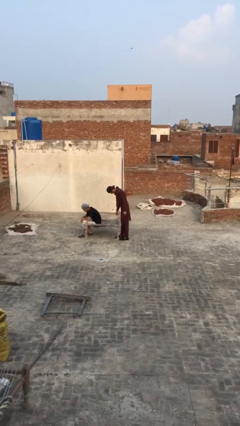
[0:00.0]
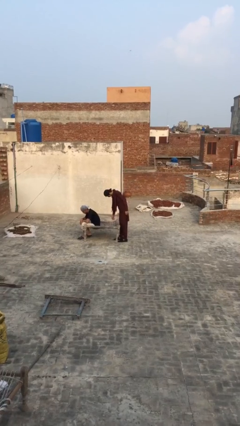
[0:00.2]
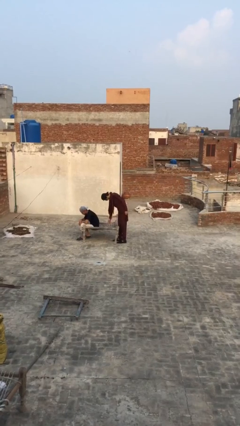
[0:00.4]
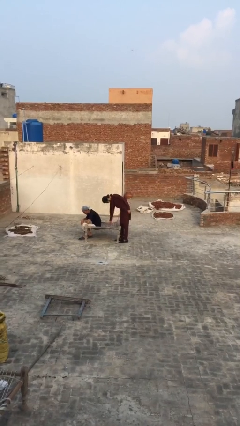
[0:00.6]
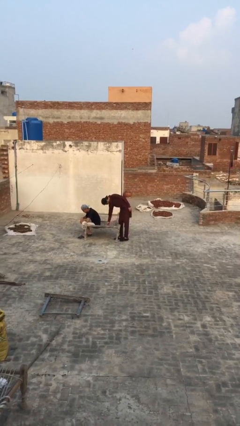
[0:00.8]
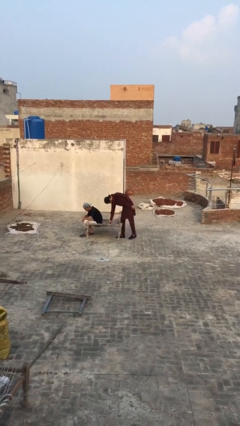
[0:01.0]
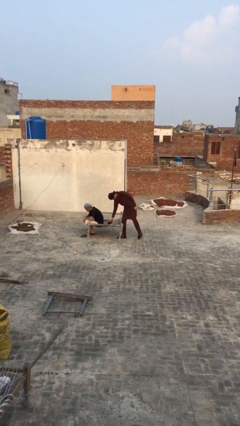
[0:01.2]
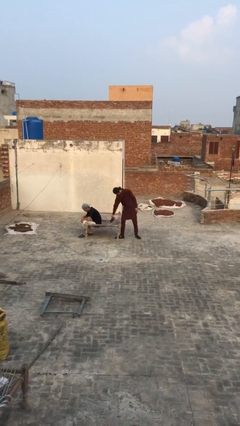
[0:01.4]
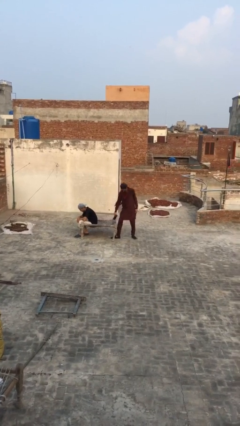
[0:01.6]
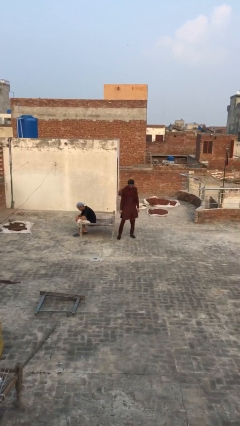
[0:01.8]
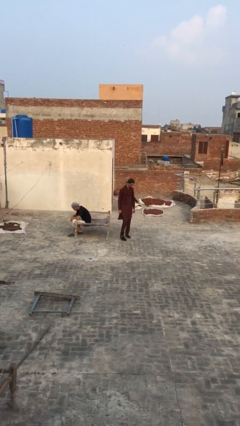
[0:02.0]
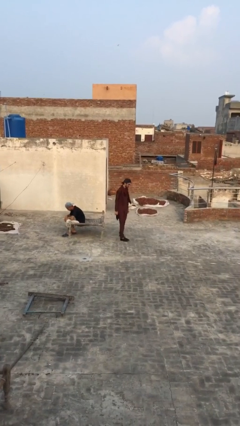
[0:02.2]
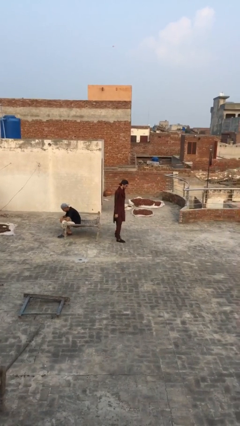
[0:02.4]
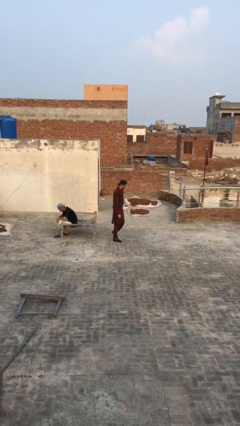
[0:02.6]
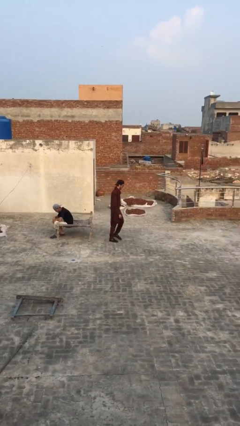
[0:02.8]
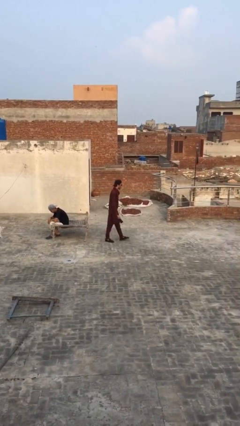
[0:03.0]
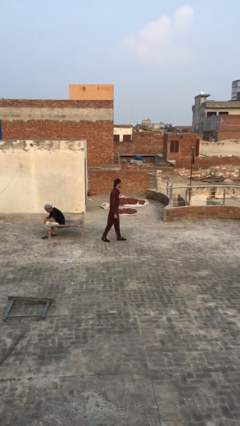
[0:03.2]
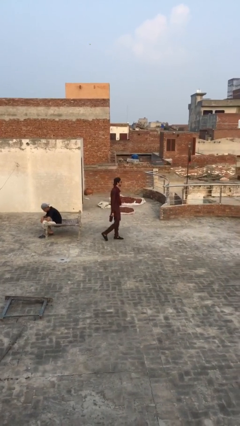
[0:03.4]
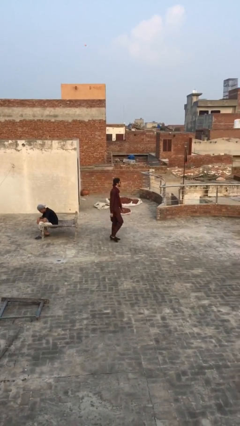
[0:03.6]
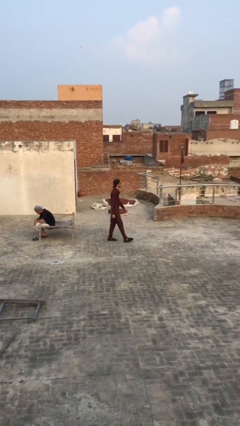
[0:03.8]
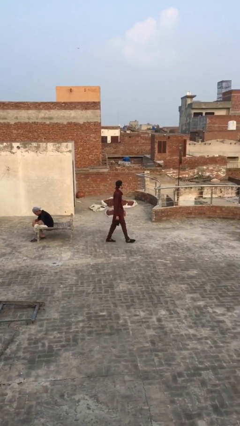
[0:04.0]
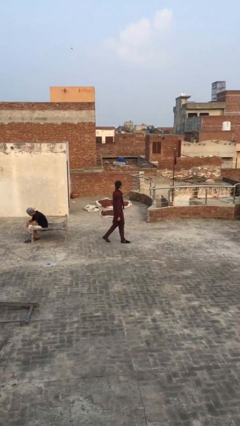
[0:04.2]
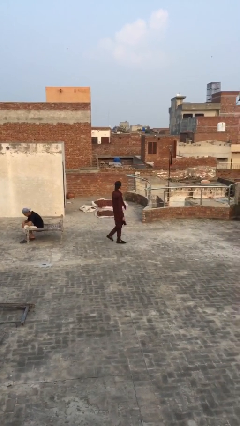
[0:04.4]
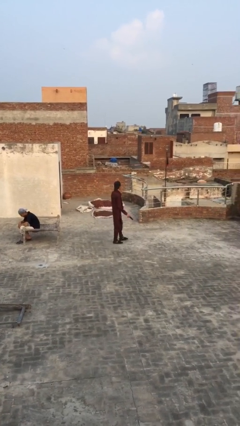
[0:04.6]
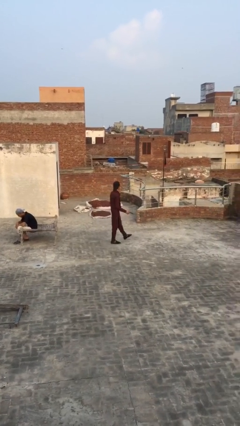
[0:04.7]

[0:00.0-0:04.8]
person steals object from person

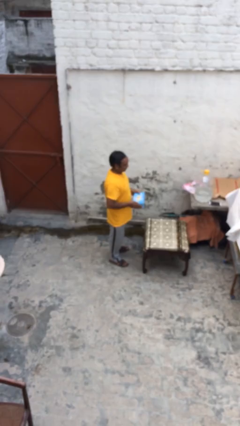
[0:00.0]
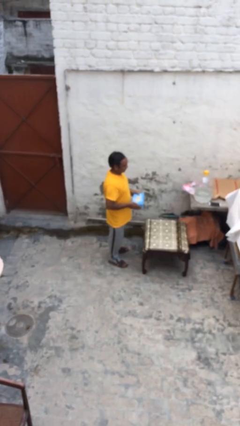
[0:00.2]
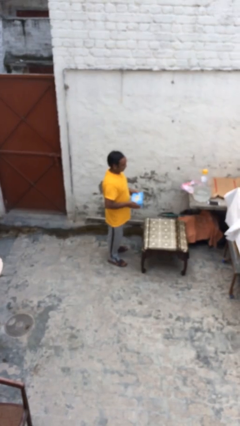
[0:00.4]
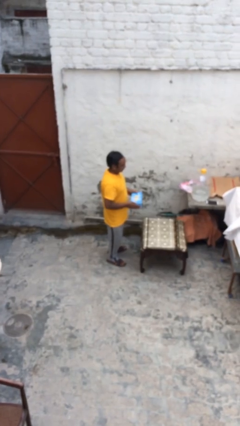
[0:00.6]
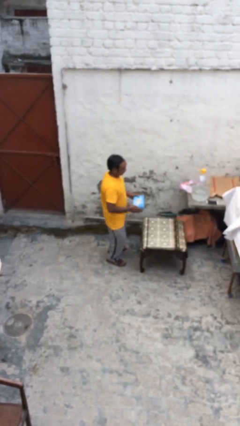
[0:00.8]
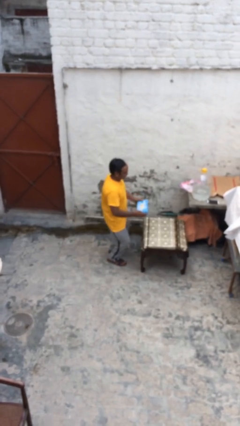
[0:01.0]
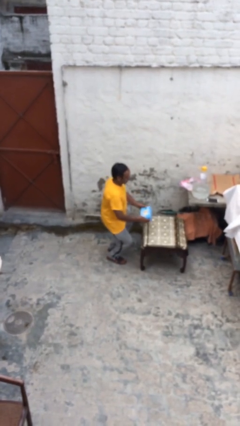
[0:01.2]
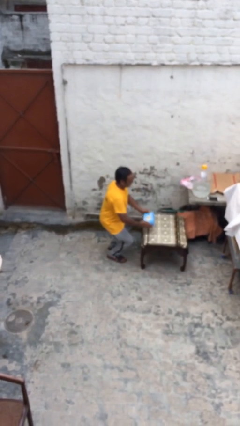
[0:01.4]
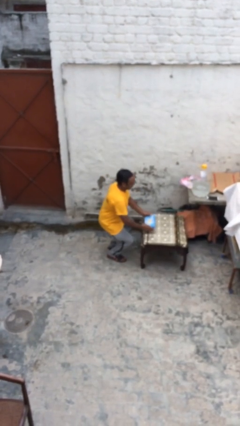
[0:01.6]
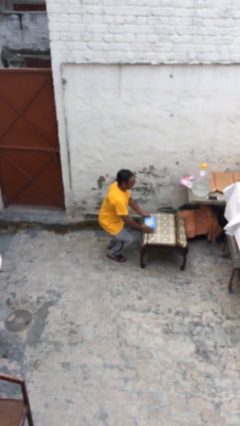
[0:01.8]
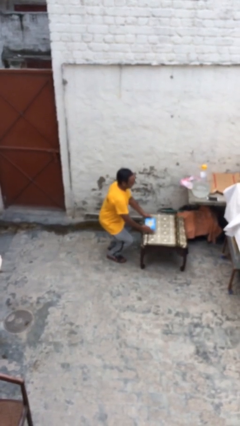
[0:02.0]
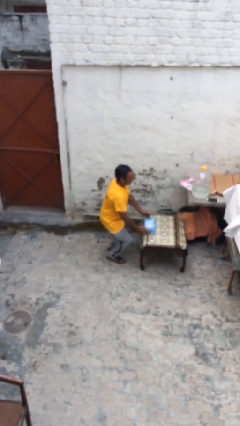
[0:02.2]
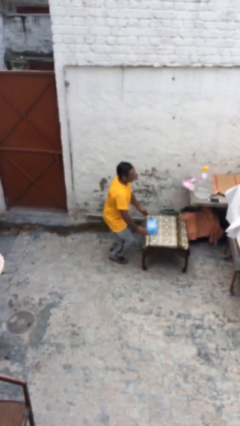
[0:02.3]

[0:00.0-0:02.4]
person puts down object on table

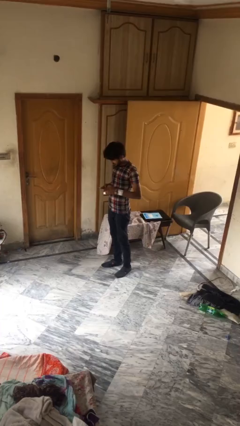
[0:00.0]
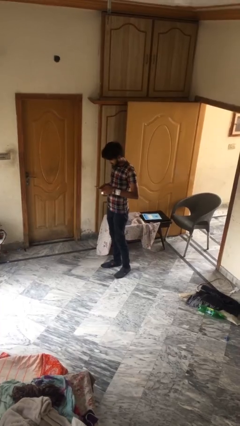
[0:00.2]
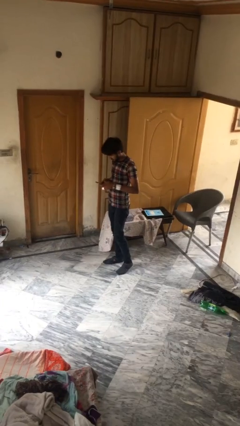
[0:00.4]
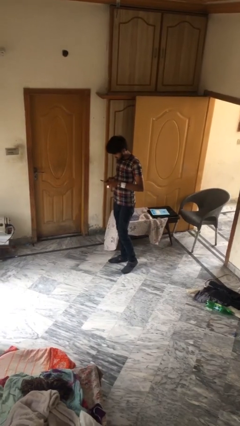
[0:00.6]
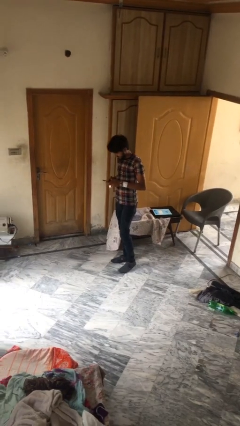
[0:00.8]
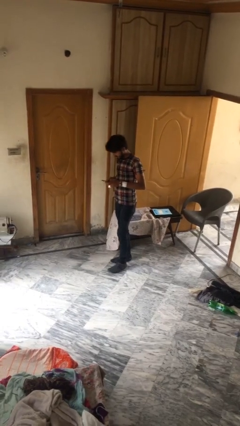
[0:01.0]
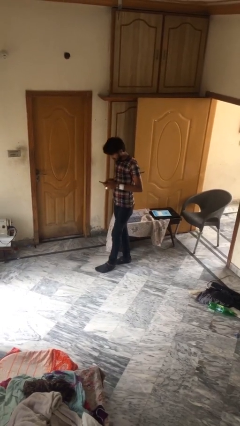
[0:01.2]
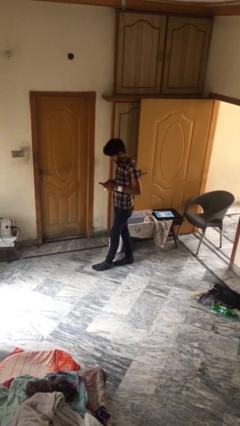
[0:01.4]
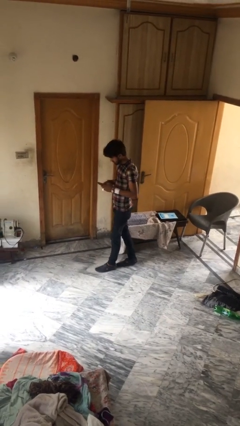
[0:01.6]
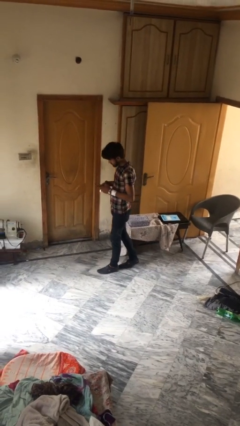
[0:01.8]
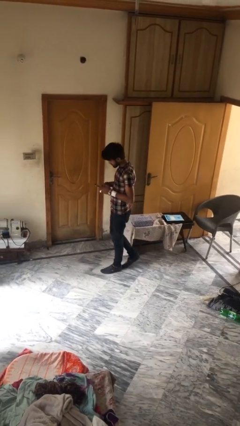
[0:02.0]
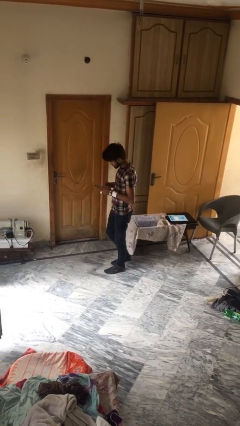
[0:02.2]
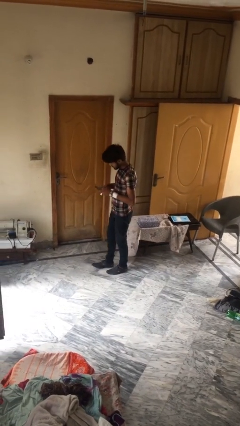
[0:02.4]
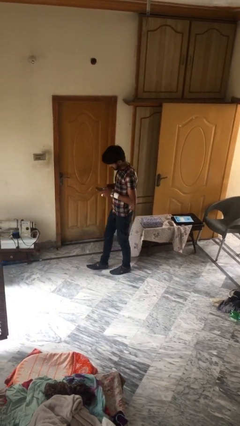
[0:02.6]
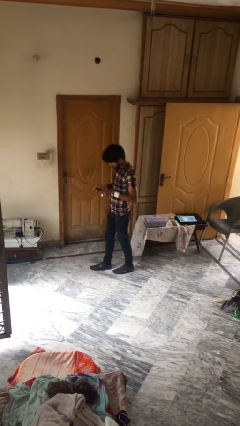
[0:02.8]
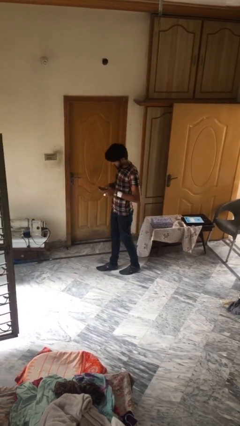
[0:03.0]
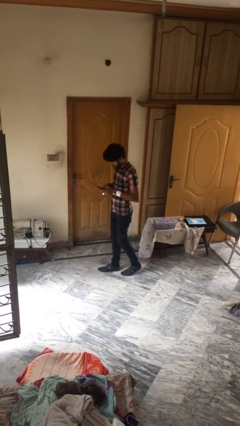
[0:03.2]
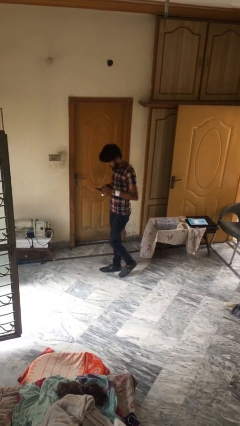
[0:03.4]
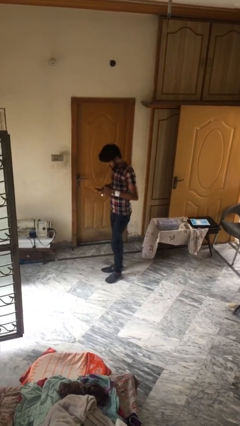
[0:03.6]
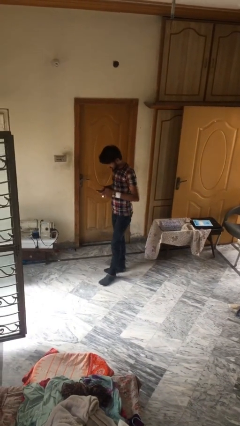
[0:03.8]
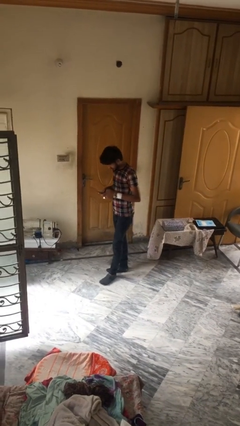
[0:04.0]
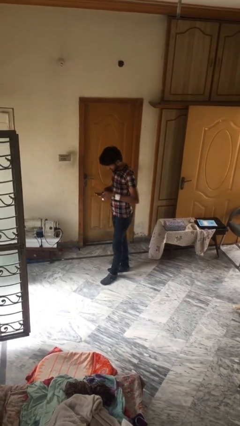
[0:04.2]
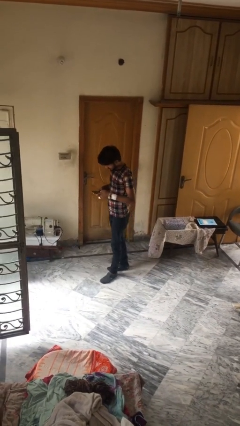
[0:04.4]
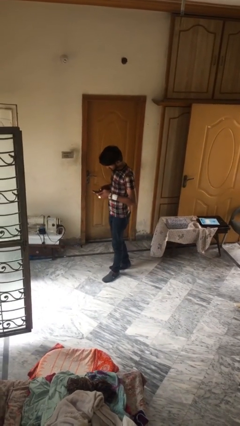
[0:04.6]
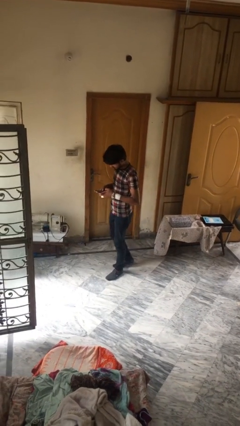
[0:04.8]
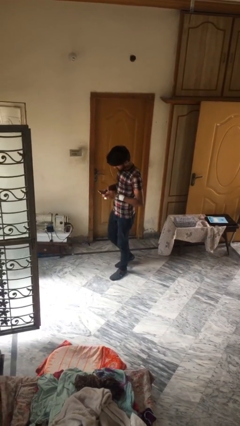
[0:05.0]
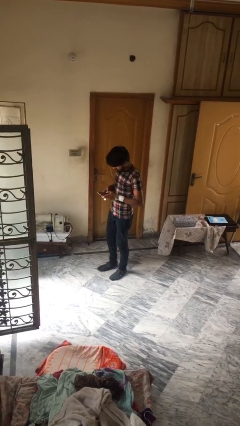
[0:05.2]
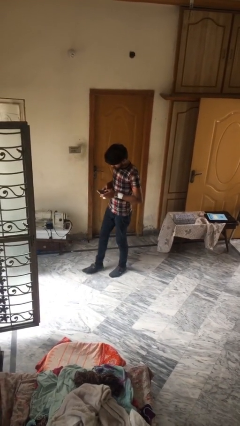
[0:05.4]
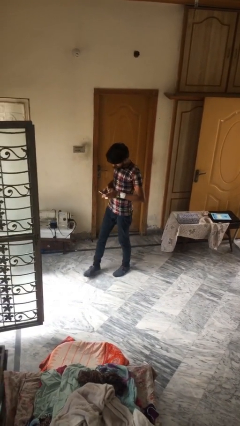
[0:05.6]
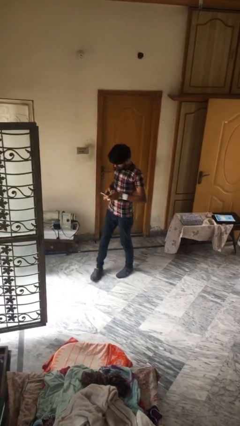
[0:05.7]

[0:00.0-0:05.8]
person texts on phone

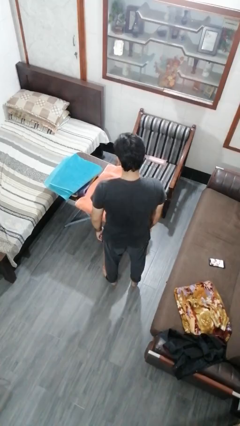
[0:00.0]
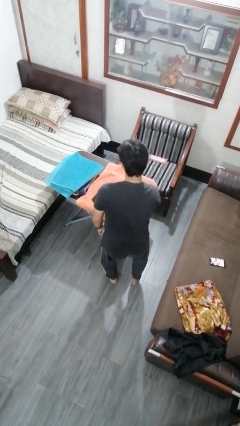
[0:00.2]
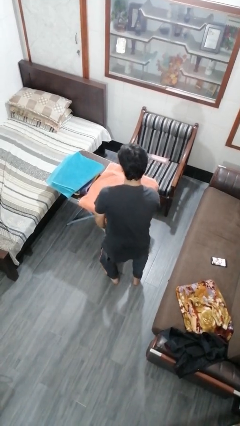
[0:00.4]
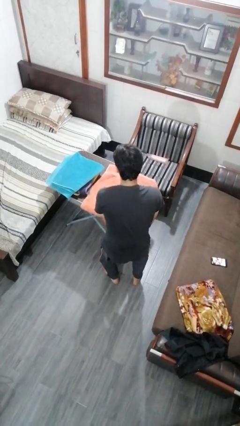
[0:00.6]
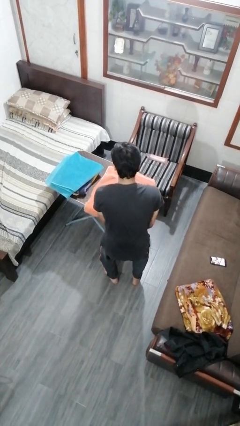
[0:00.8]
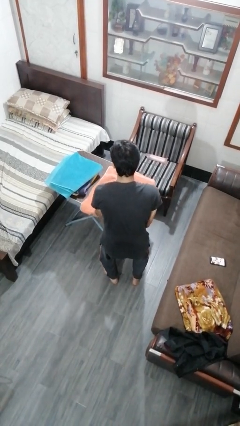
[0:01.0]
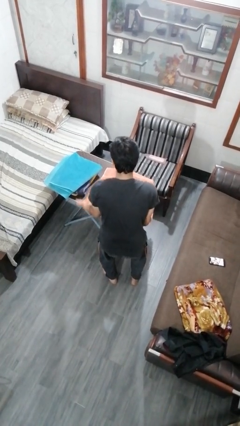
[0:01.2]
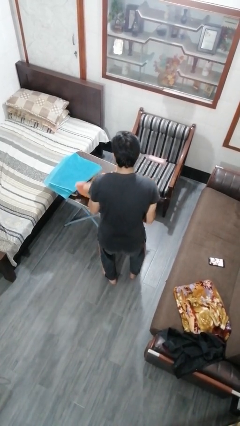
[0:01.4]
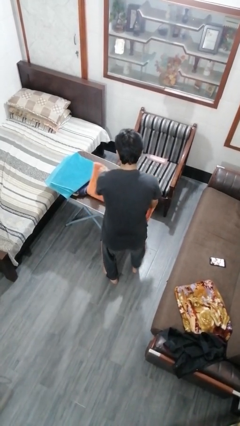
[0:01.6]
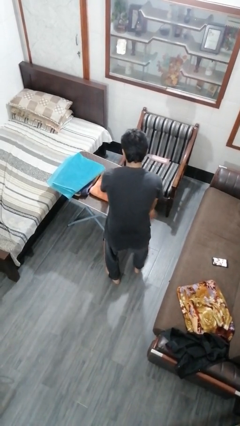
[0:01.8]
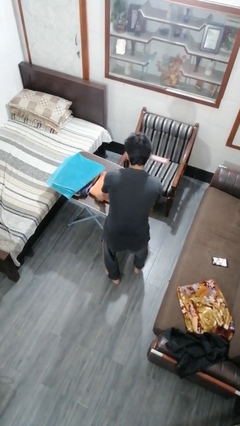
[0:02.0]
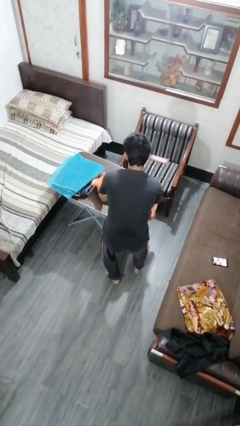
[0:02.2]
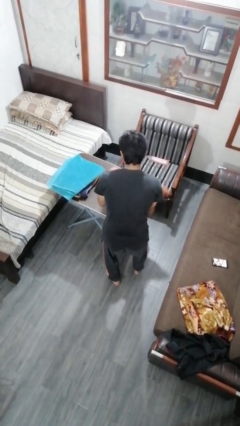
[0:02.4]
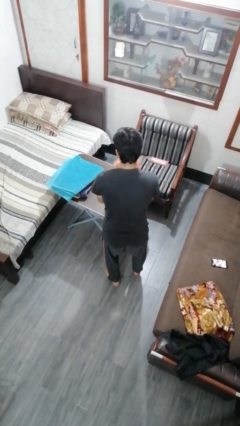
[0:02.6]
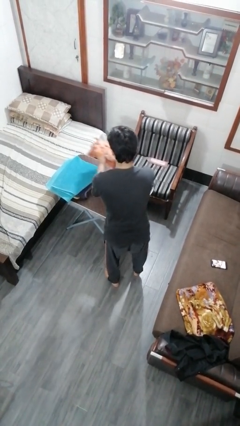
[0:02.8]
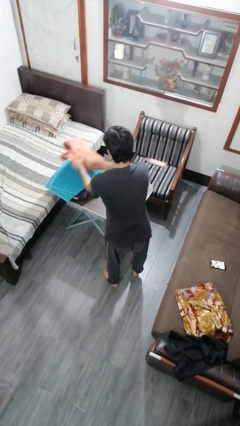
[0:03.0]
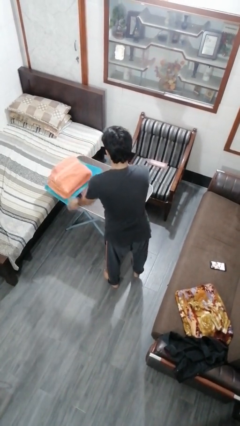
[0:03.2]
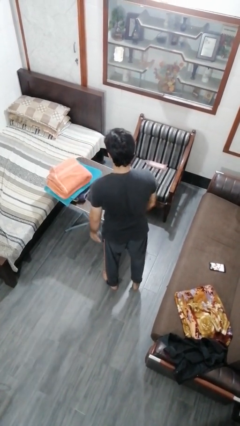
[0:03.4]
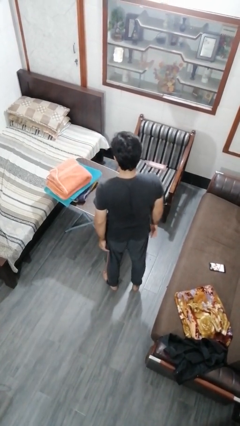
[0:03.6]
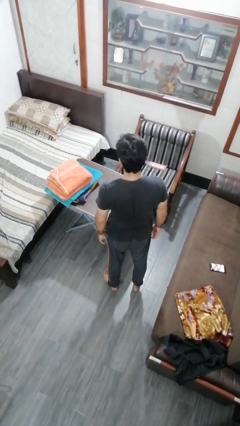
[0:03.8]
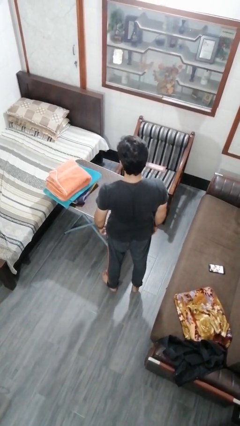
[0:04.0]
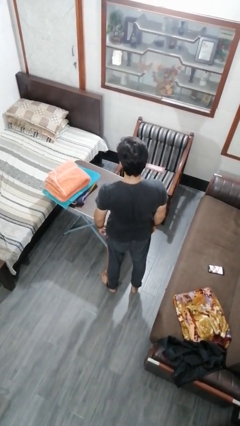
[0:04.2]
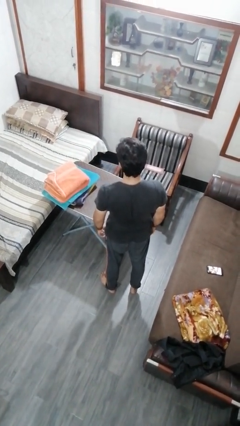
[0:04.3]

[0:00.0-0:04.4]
person folds towel

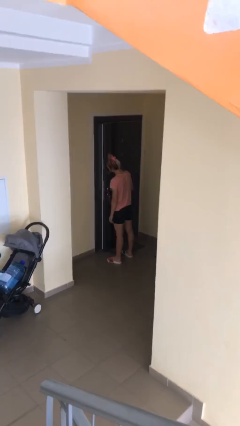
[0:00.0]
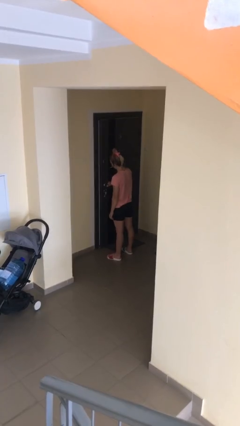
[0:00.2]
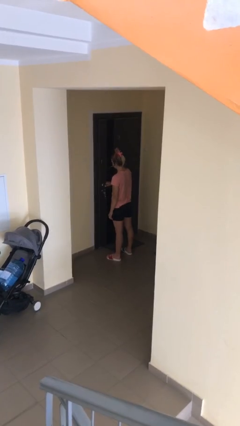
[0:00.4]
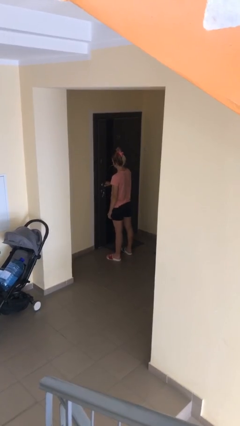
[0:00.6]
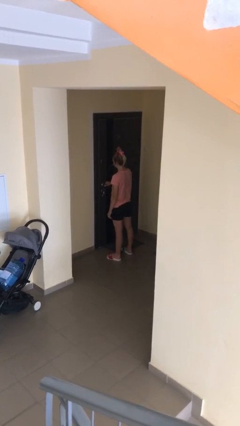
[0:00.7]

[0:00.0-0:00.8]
person closes facility door
